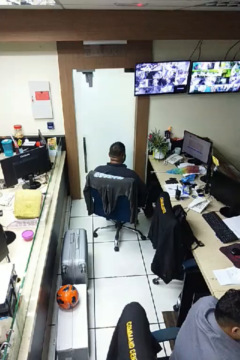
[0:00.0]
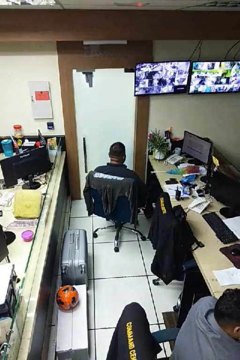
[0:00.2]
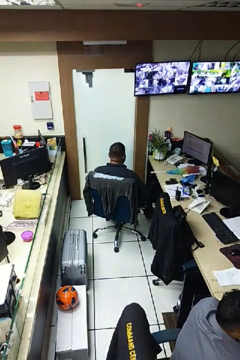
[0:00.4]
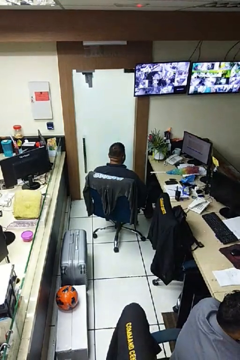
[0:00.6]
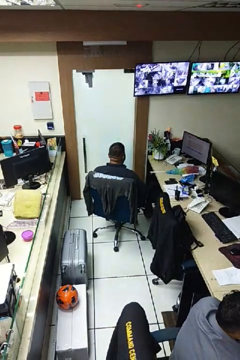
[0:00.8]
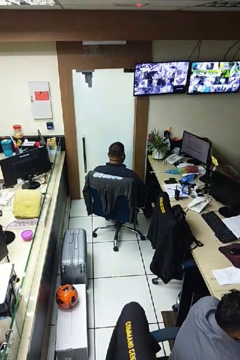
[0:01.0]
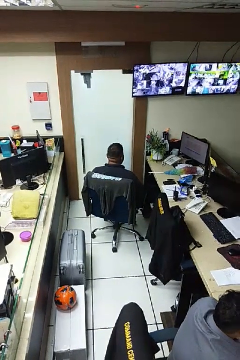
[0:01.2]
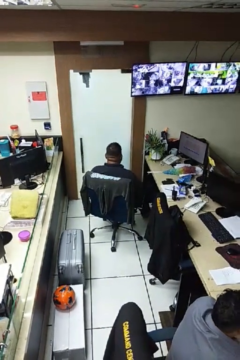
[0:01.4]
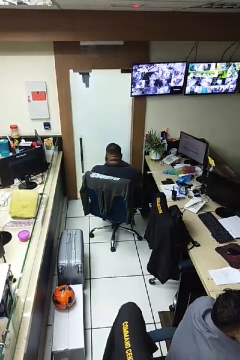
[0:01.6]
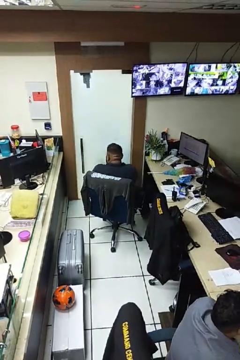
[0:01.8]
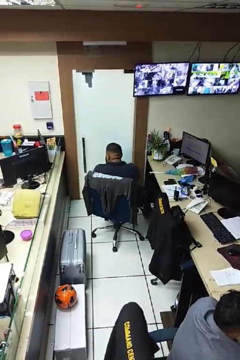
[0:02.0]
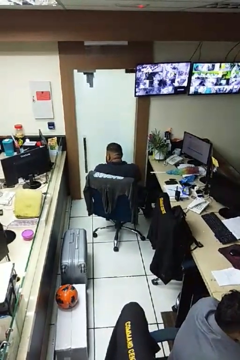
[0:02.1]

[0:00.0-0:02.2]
person swats bug

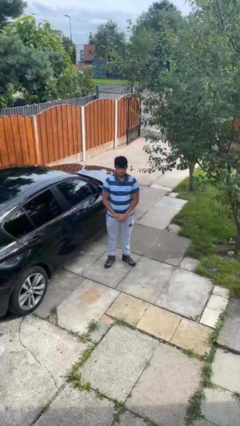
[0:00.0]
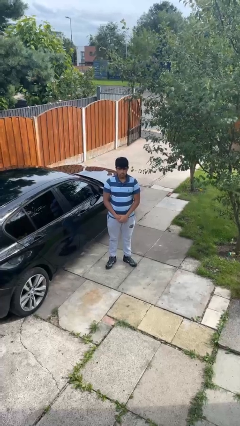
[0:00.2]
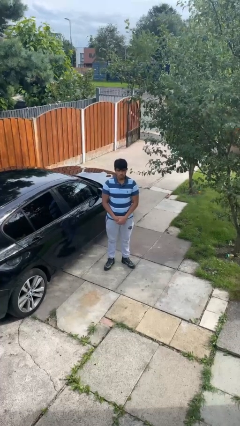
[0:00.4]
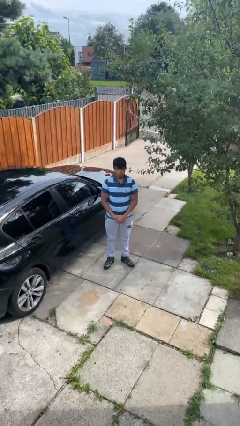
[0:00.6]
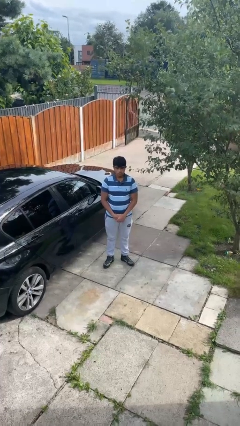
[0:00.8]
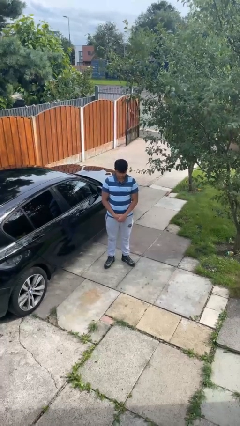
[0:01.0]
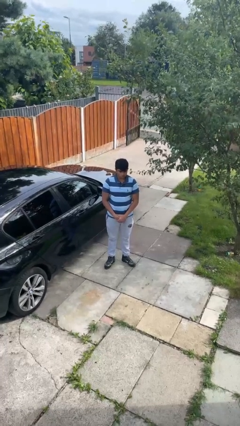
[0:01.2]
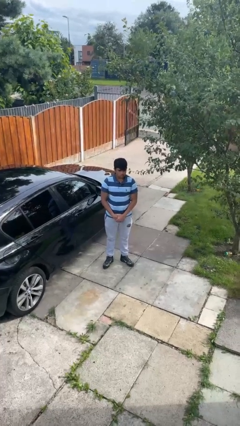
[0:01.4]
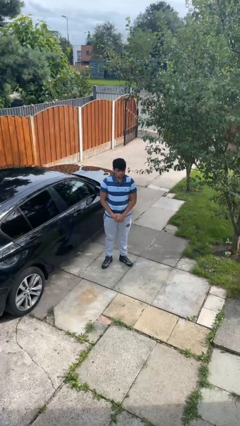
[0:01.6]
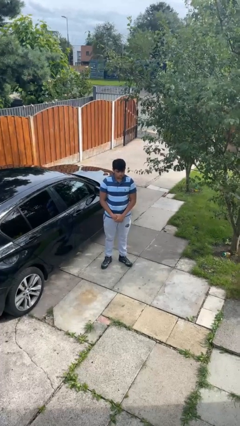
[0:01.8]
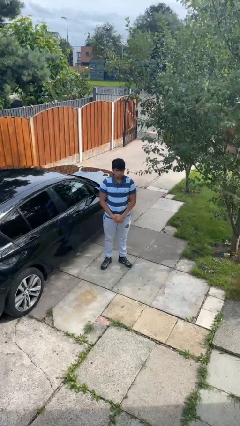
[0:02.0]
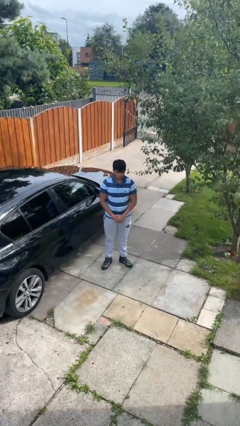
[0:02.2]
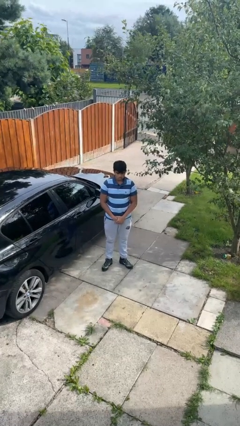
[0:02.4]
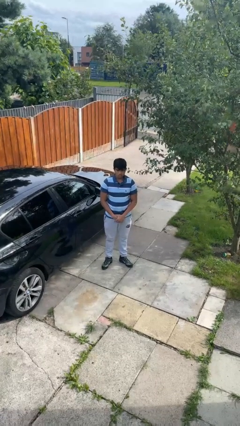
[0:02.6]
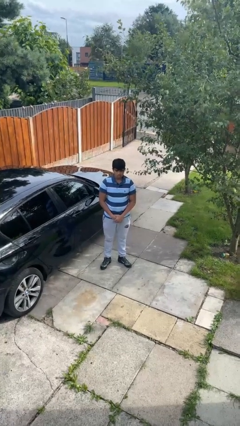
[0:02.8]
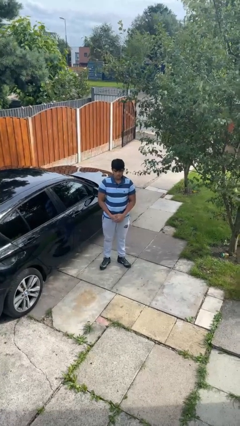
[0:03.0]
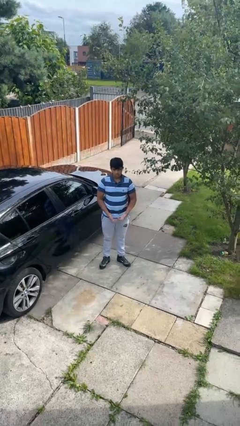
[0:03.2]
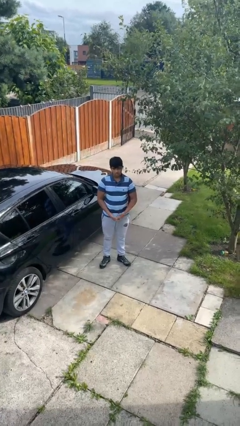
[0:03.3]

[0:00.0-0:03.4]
person nods head

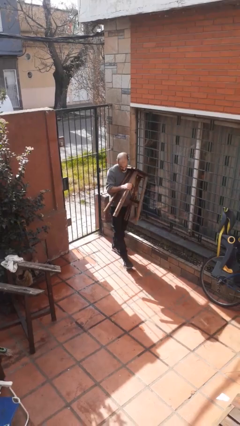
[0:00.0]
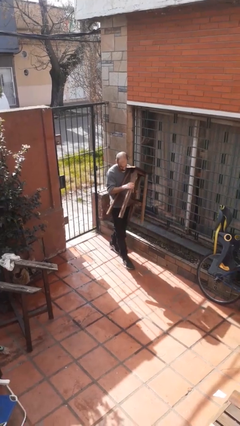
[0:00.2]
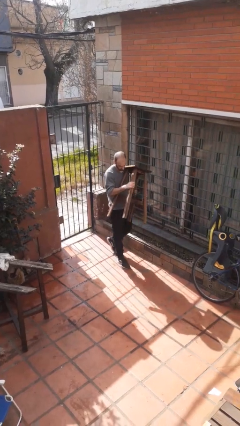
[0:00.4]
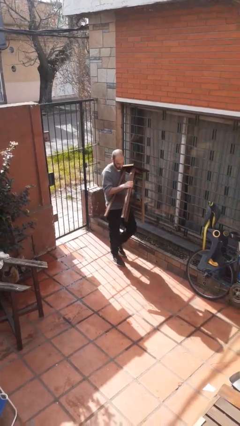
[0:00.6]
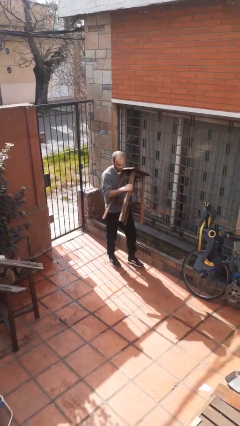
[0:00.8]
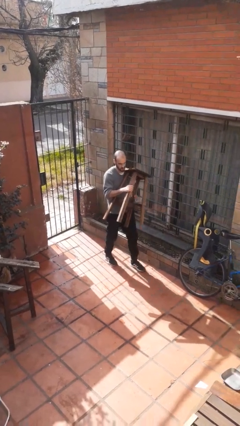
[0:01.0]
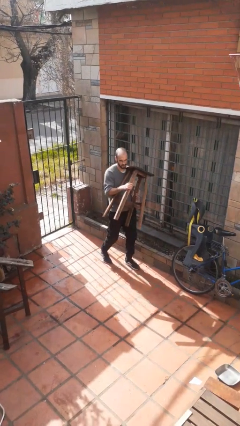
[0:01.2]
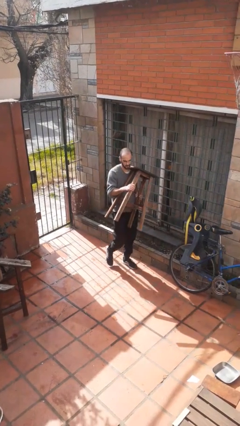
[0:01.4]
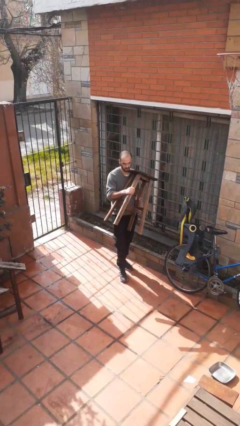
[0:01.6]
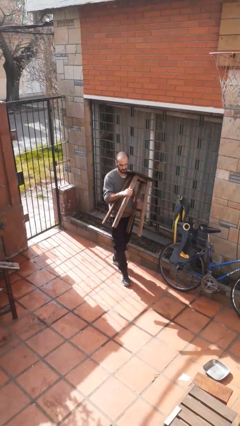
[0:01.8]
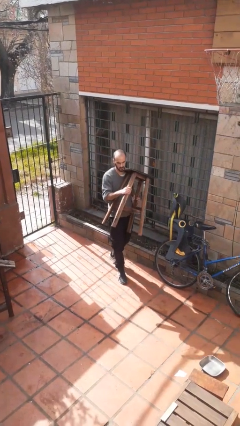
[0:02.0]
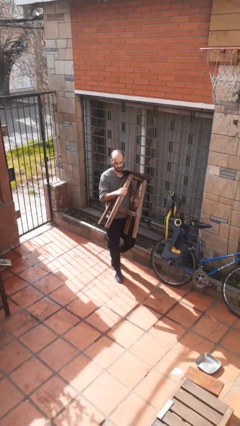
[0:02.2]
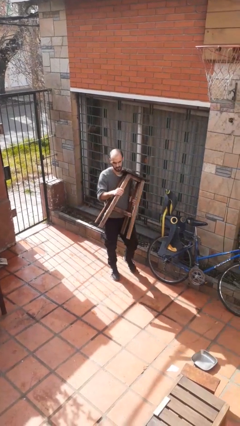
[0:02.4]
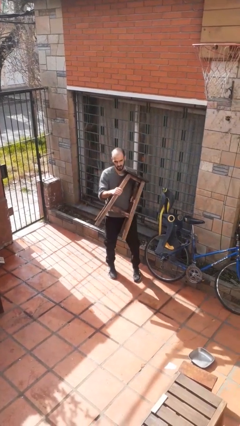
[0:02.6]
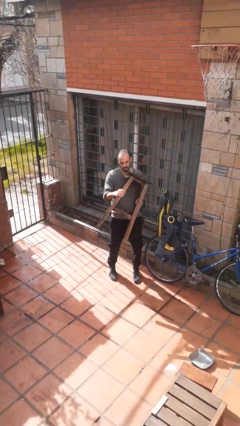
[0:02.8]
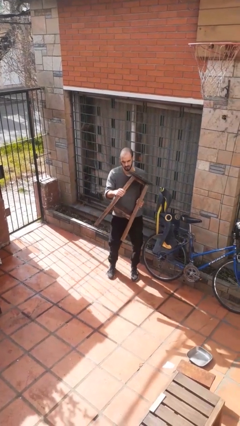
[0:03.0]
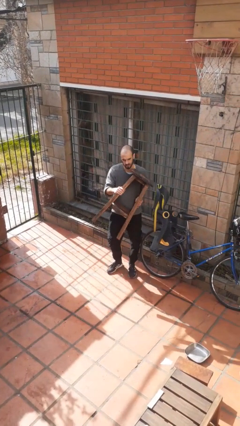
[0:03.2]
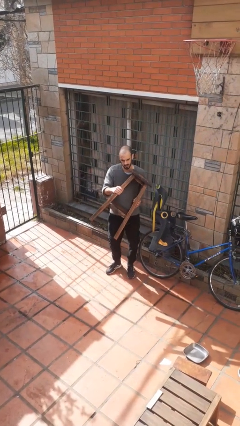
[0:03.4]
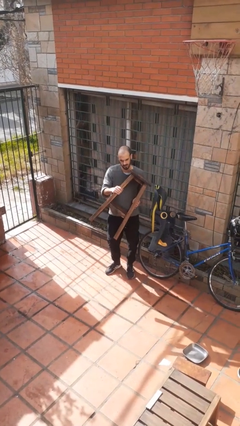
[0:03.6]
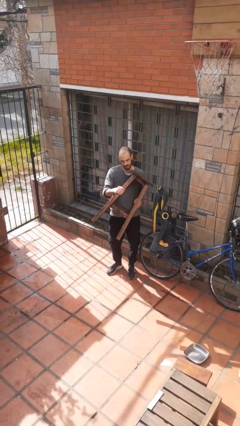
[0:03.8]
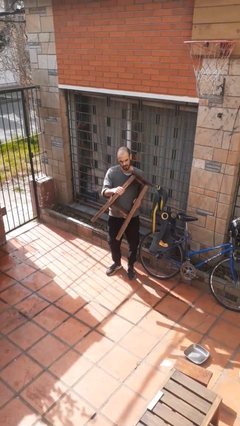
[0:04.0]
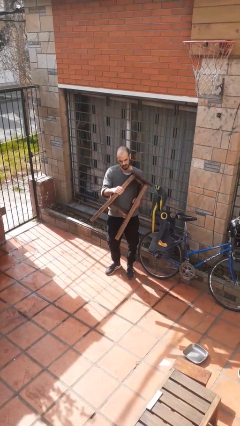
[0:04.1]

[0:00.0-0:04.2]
person carries furniture

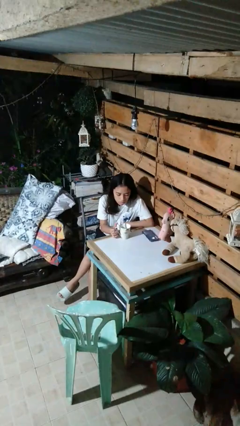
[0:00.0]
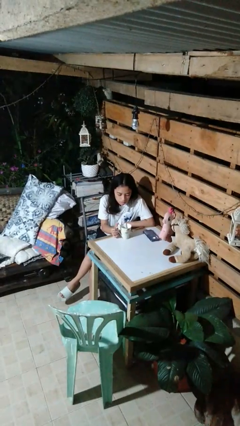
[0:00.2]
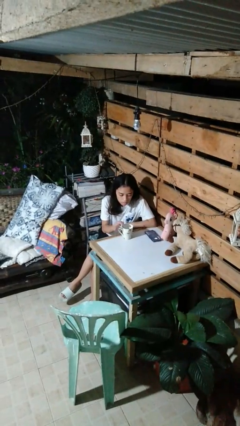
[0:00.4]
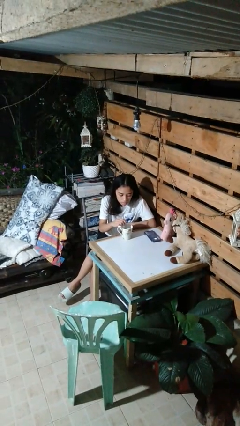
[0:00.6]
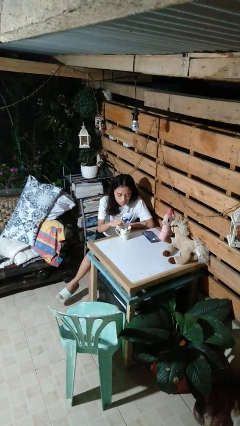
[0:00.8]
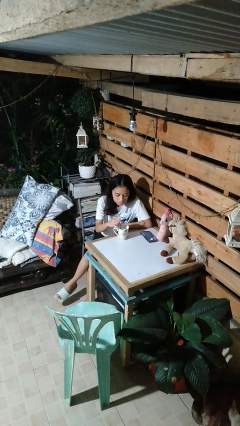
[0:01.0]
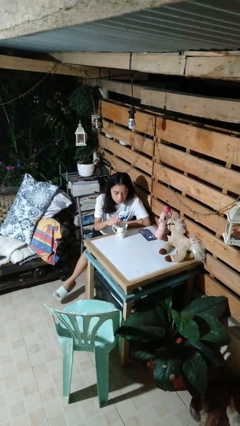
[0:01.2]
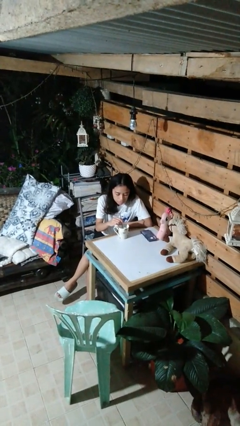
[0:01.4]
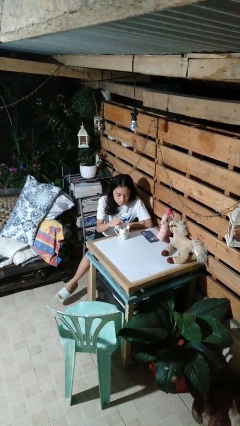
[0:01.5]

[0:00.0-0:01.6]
person stirs mug

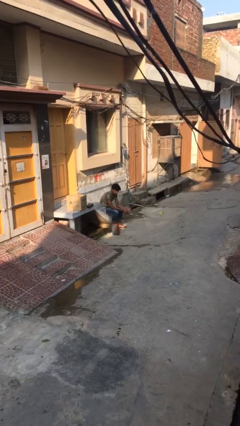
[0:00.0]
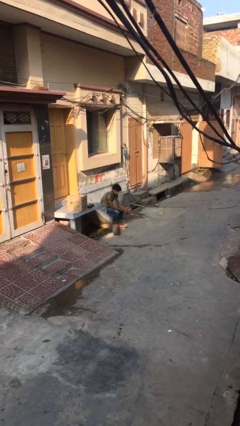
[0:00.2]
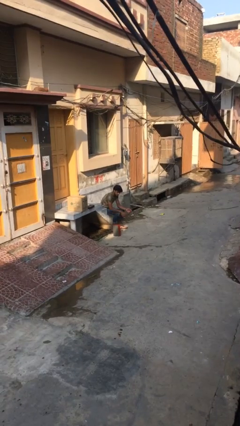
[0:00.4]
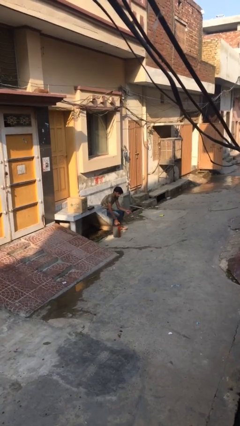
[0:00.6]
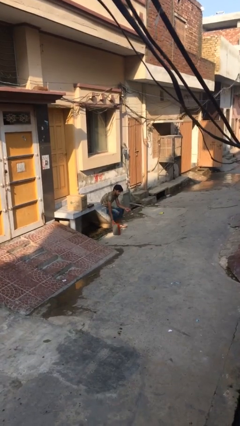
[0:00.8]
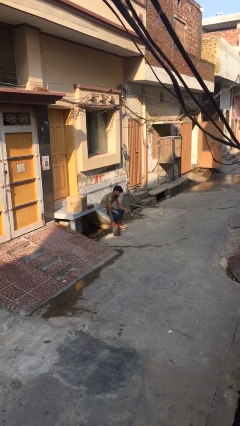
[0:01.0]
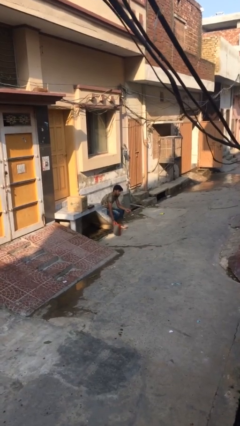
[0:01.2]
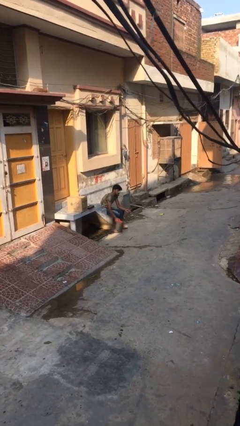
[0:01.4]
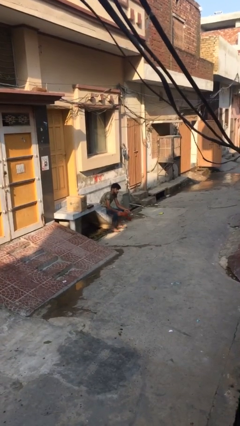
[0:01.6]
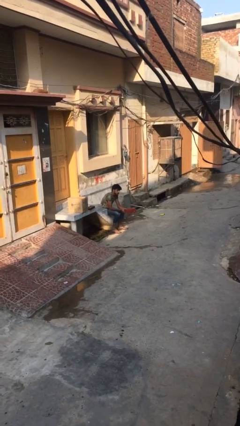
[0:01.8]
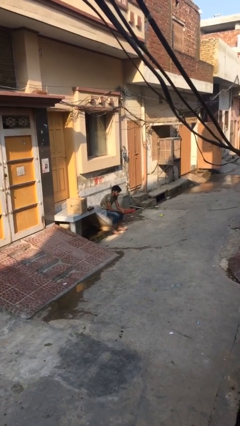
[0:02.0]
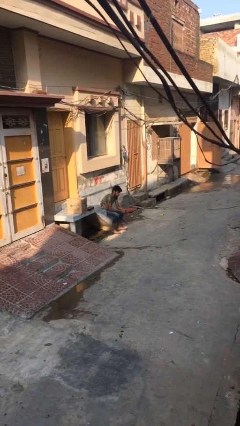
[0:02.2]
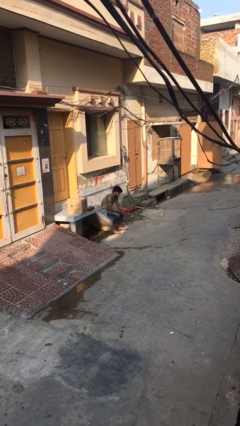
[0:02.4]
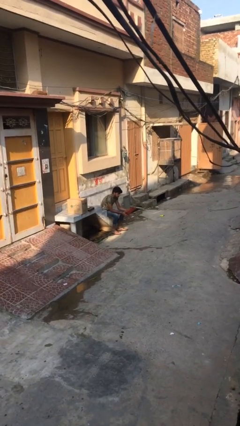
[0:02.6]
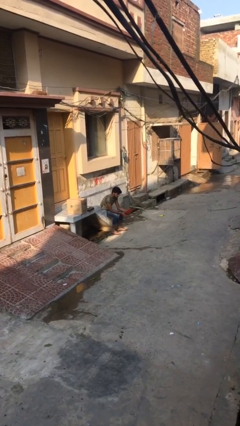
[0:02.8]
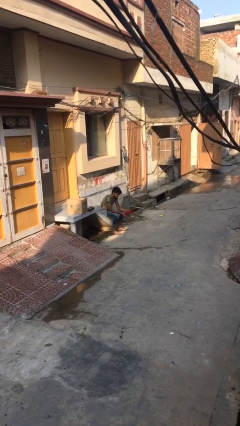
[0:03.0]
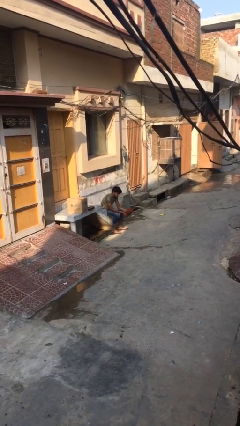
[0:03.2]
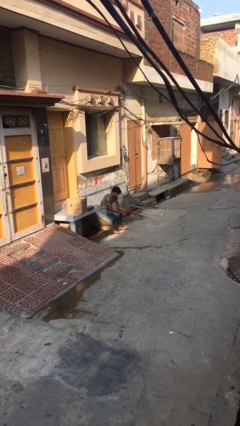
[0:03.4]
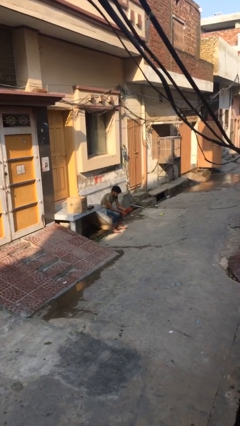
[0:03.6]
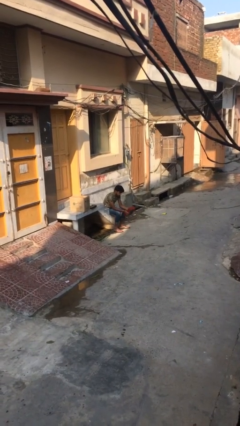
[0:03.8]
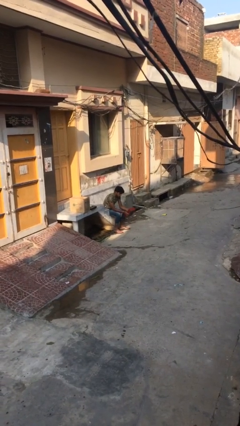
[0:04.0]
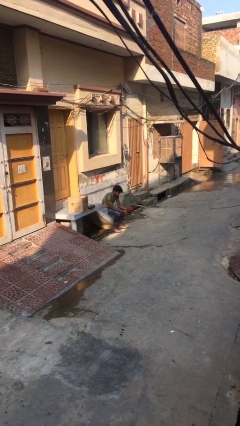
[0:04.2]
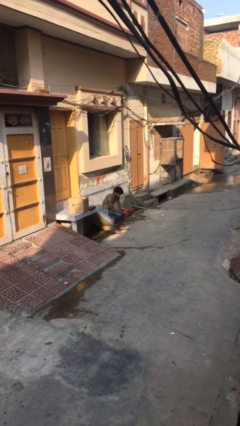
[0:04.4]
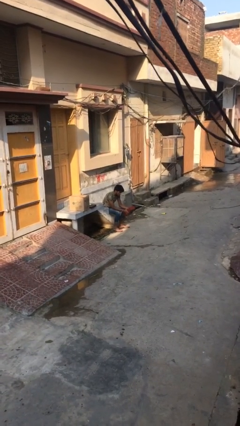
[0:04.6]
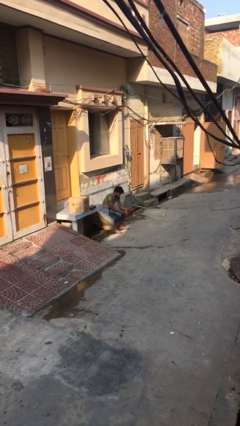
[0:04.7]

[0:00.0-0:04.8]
person picks up object from floor

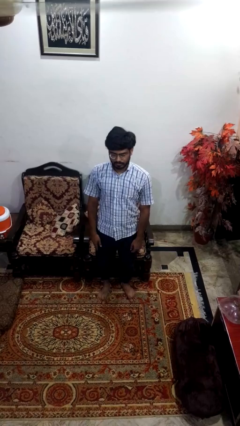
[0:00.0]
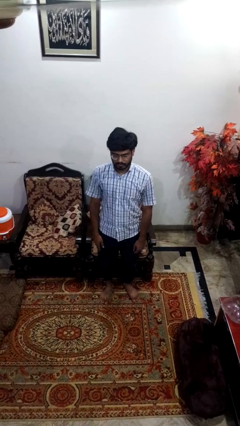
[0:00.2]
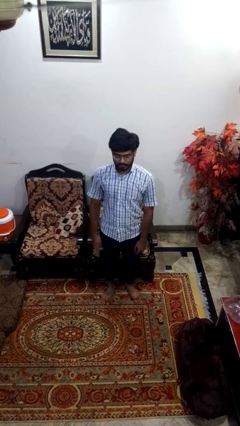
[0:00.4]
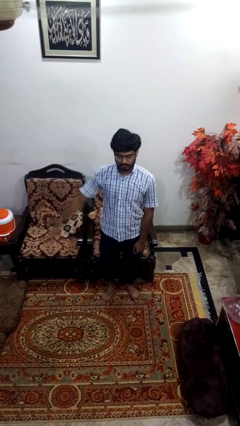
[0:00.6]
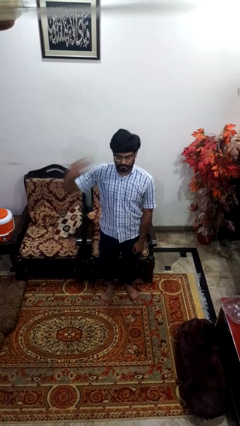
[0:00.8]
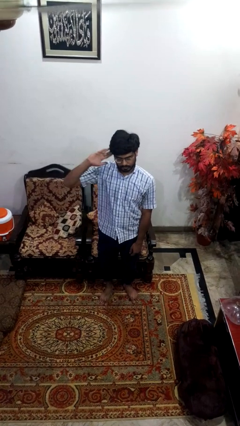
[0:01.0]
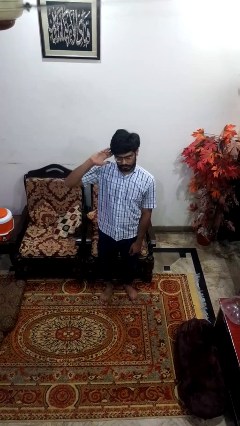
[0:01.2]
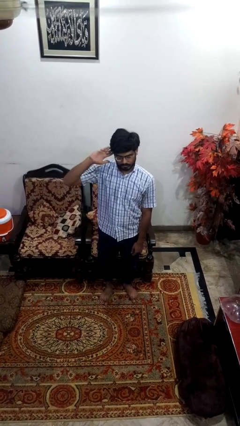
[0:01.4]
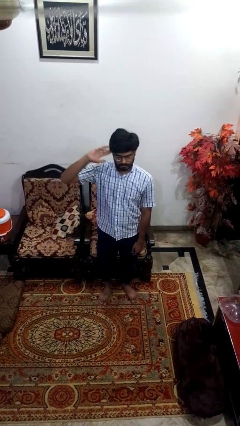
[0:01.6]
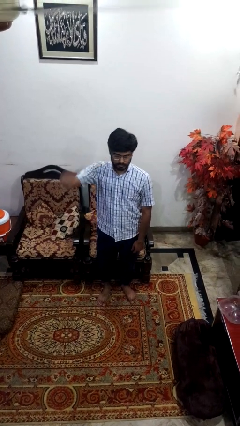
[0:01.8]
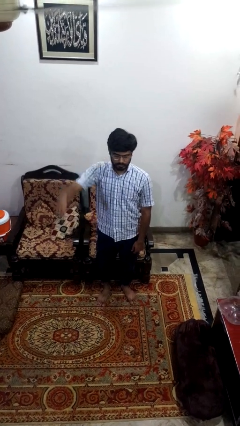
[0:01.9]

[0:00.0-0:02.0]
person salutes
